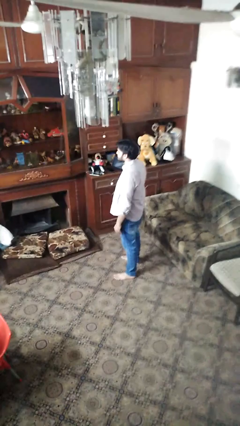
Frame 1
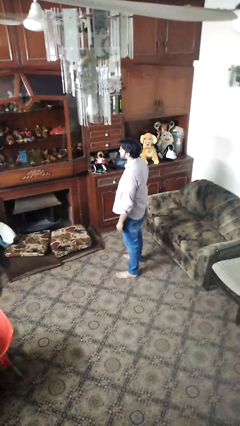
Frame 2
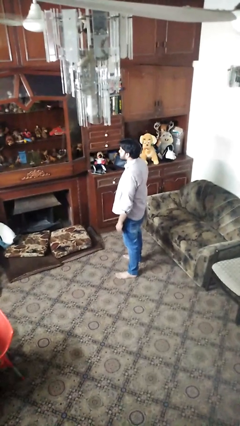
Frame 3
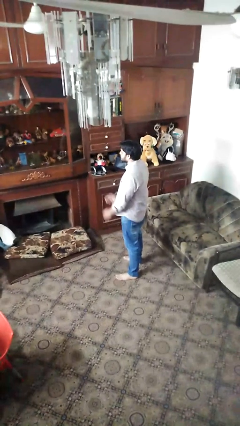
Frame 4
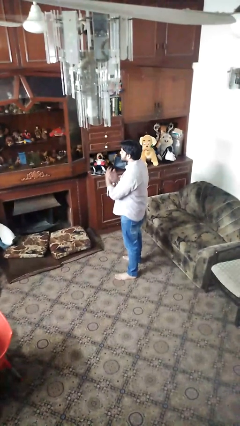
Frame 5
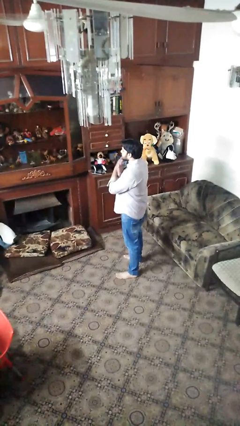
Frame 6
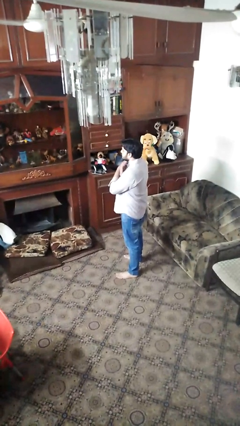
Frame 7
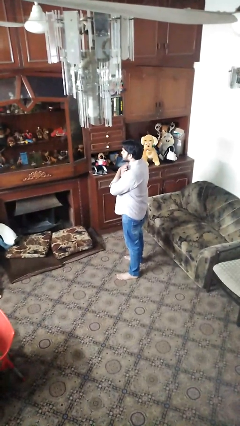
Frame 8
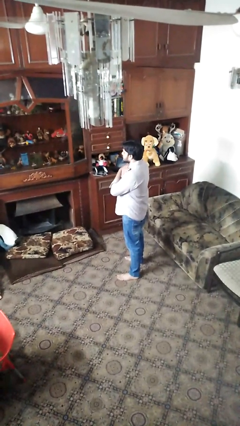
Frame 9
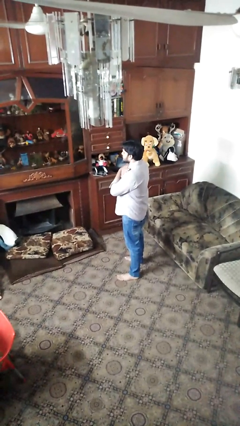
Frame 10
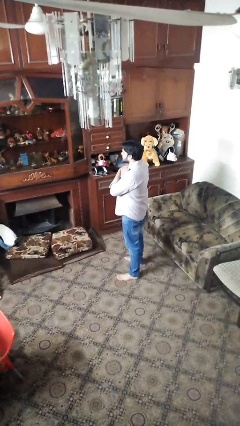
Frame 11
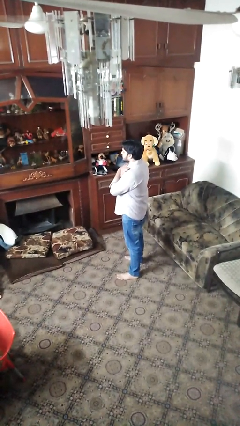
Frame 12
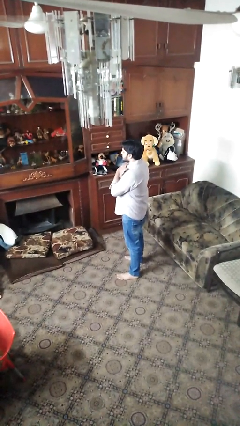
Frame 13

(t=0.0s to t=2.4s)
person gestures arms x

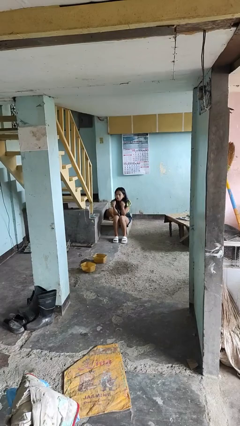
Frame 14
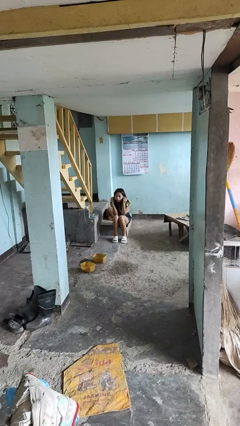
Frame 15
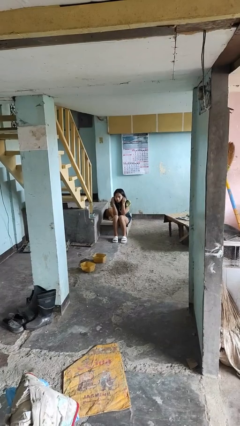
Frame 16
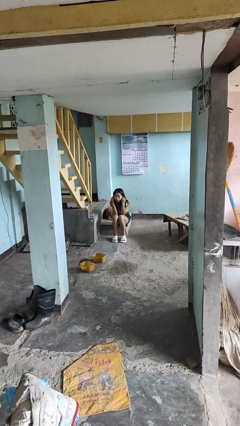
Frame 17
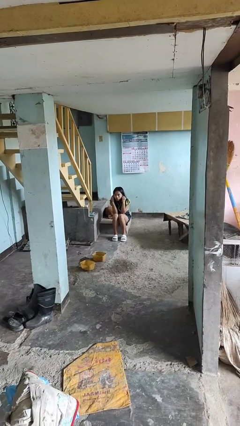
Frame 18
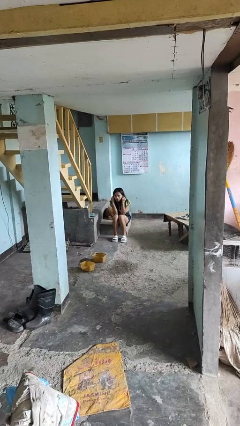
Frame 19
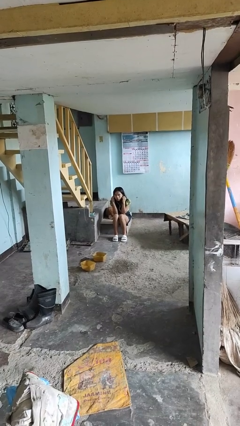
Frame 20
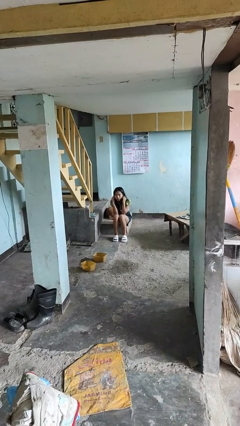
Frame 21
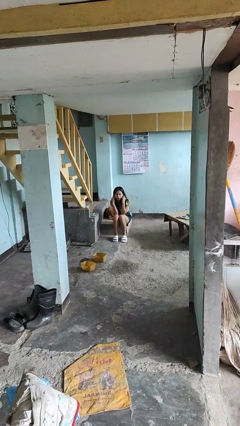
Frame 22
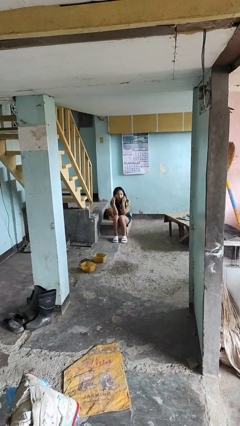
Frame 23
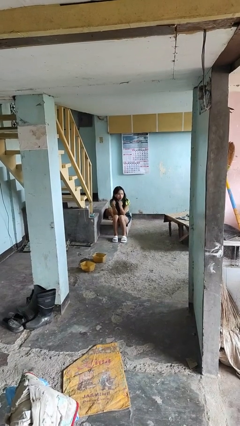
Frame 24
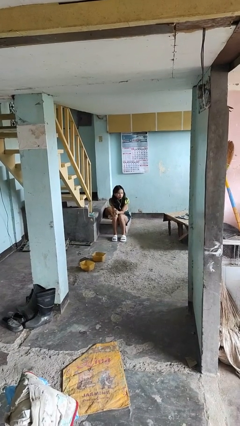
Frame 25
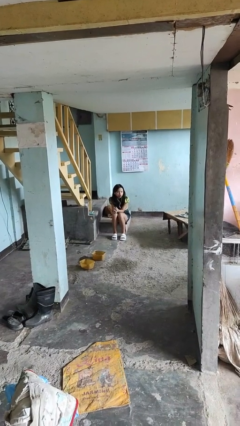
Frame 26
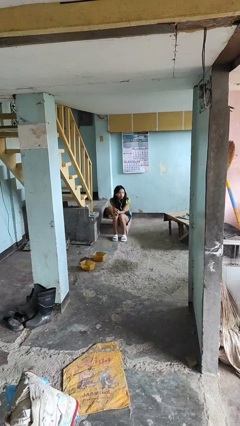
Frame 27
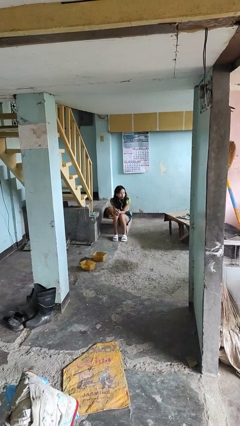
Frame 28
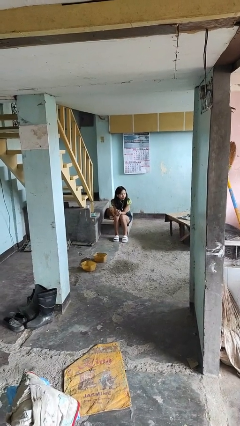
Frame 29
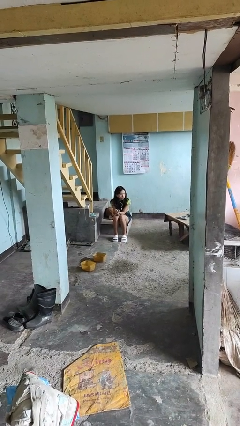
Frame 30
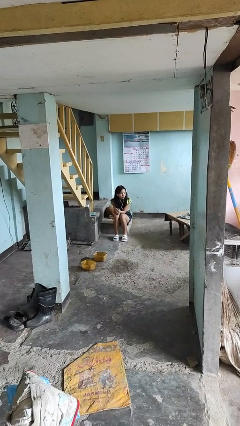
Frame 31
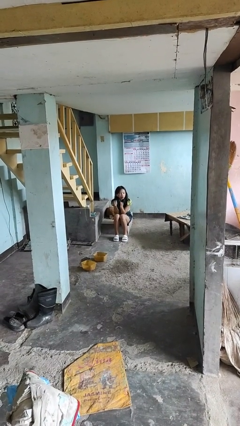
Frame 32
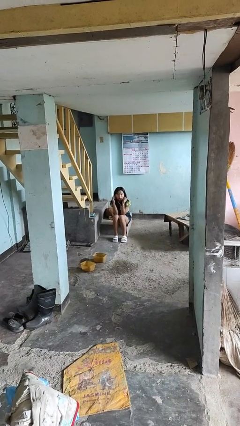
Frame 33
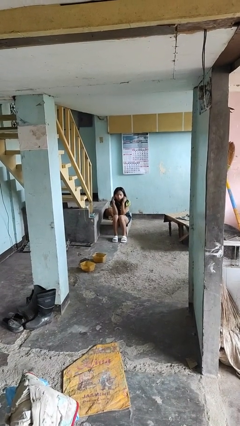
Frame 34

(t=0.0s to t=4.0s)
person puts on headphones

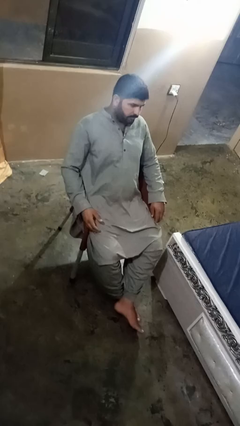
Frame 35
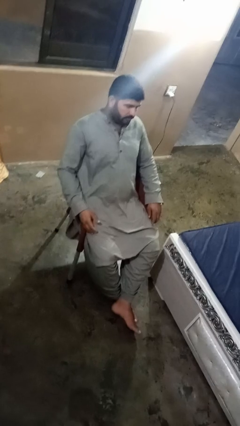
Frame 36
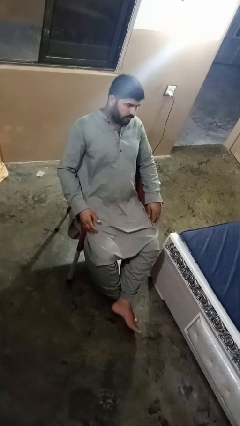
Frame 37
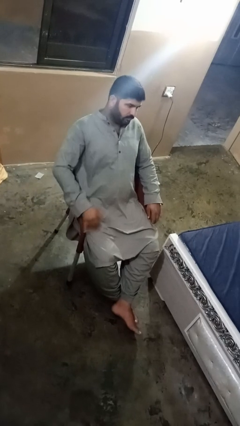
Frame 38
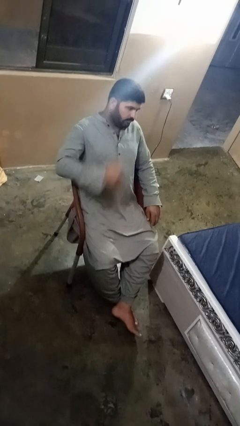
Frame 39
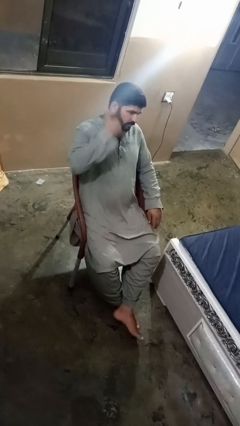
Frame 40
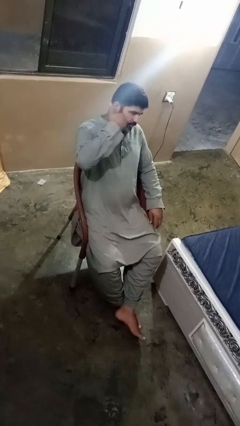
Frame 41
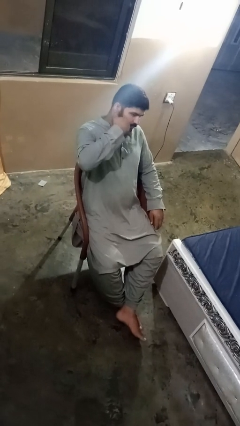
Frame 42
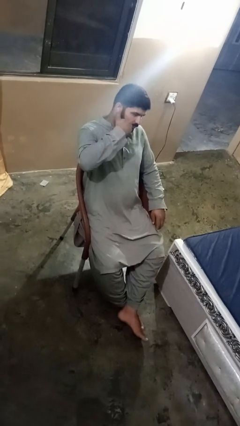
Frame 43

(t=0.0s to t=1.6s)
person gestures call me

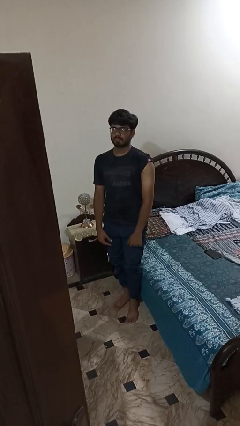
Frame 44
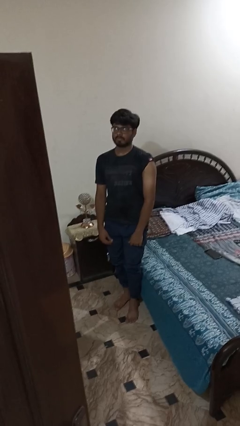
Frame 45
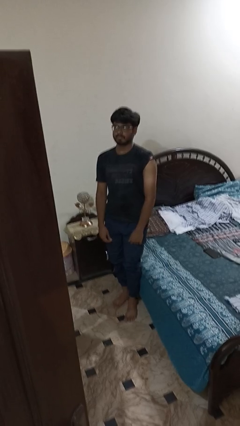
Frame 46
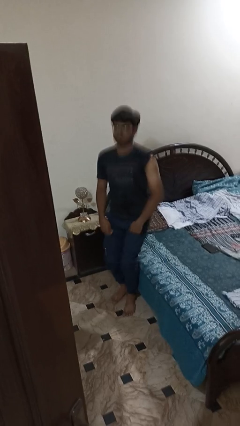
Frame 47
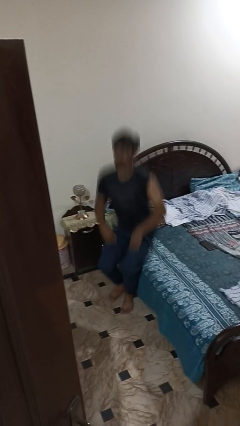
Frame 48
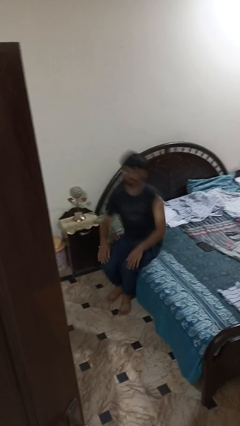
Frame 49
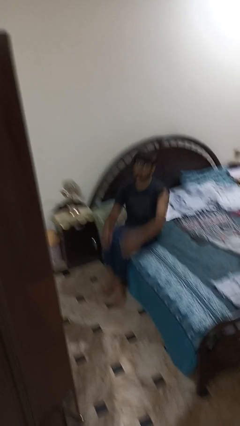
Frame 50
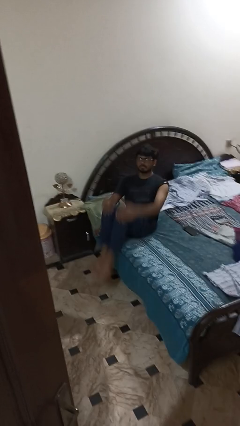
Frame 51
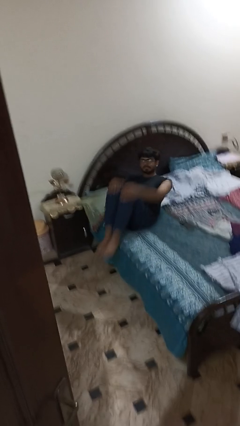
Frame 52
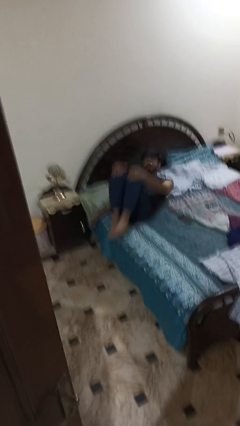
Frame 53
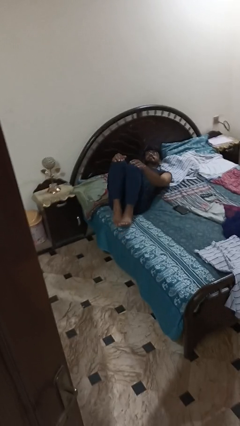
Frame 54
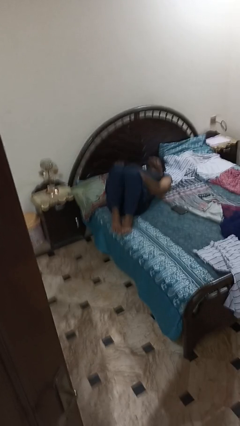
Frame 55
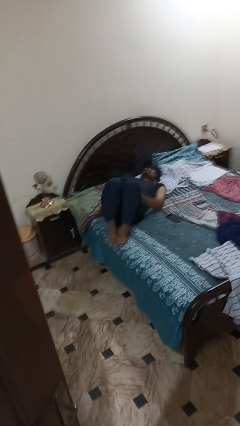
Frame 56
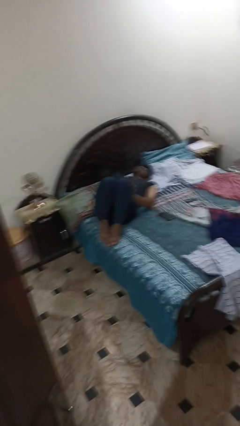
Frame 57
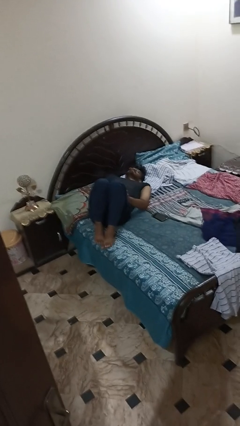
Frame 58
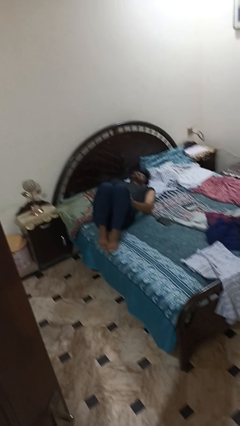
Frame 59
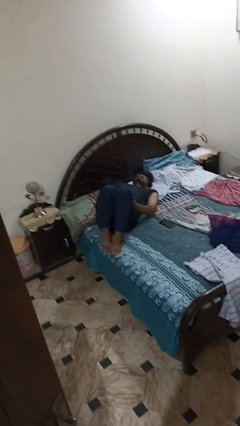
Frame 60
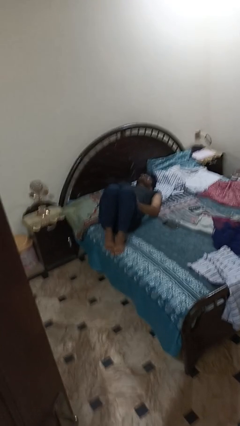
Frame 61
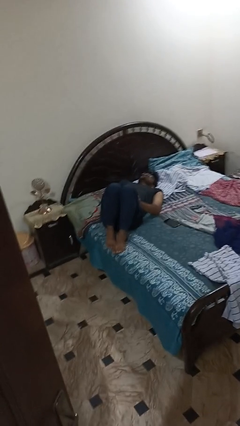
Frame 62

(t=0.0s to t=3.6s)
person lies down on bed

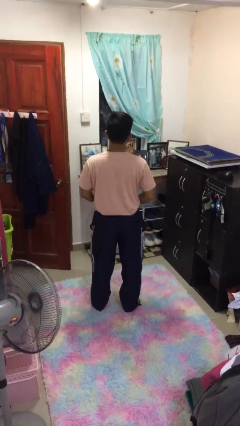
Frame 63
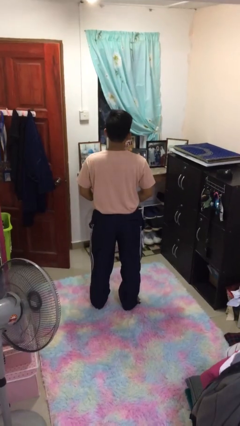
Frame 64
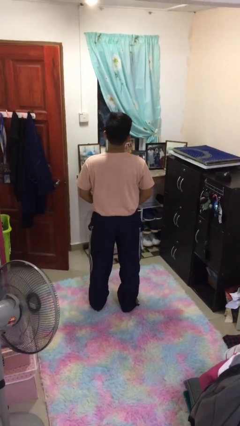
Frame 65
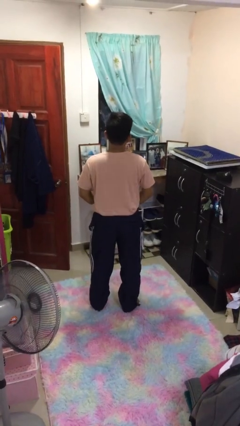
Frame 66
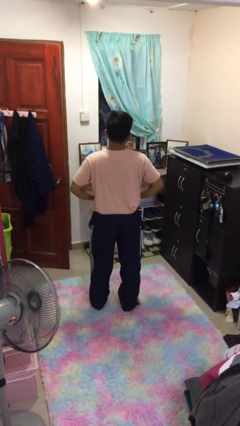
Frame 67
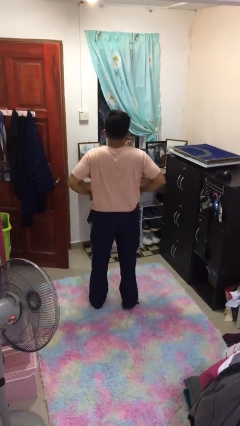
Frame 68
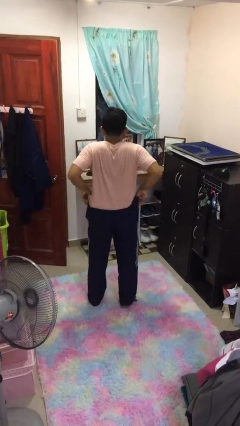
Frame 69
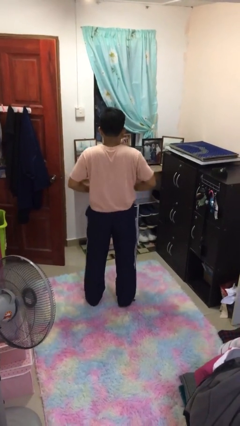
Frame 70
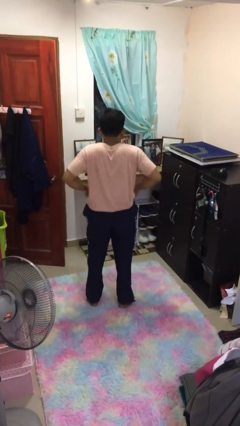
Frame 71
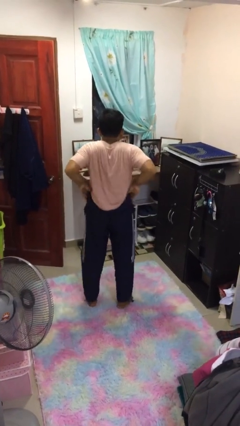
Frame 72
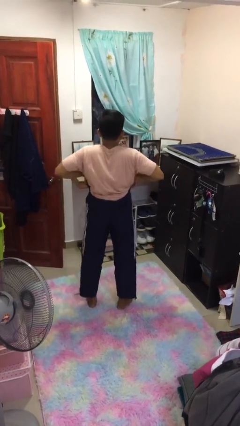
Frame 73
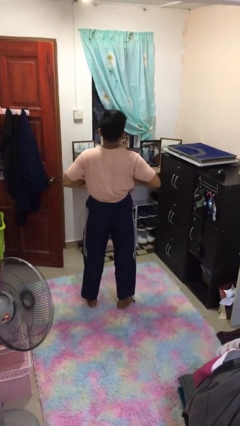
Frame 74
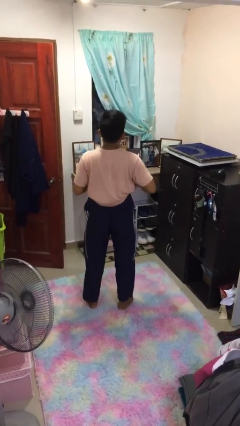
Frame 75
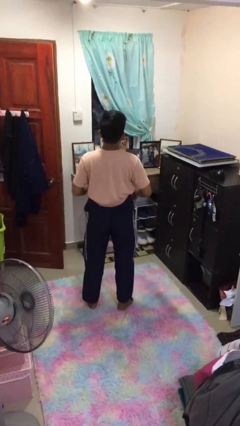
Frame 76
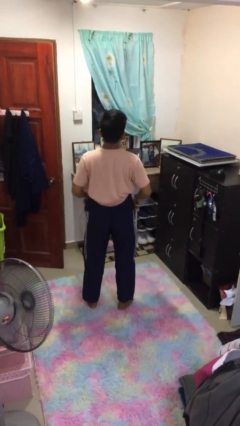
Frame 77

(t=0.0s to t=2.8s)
person hikes up pants

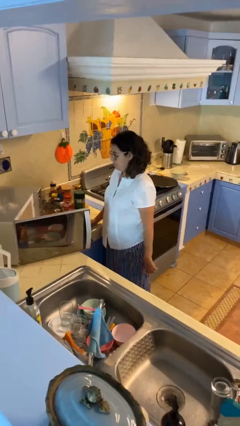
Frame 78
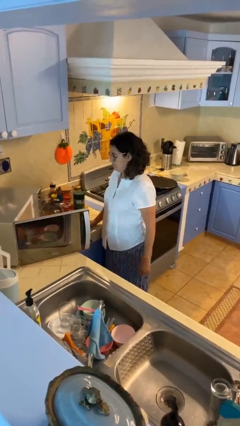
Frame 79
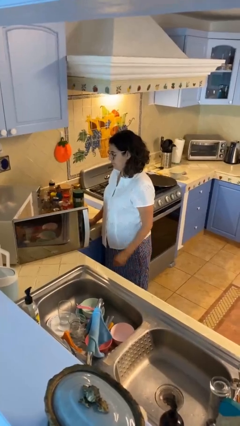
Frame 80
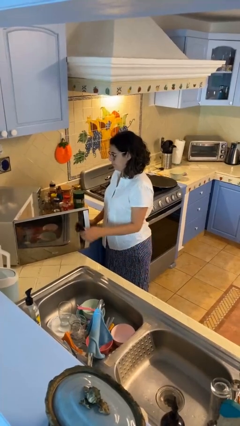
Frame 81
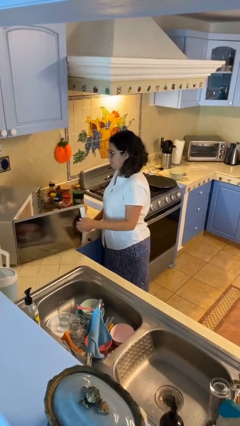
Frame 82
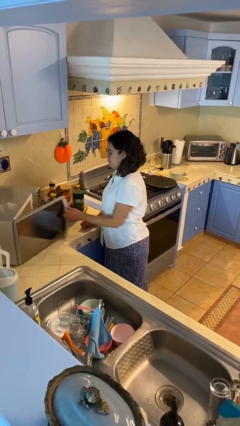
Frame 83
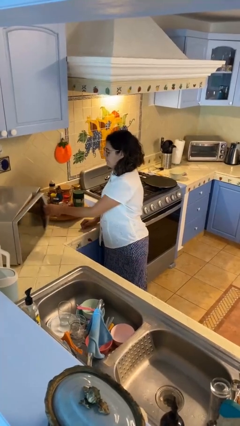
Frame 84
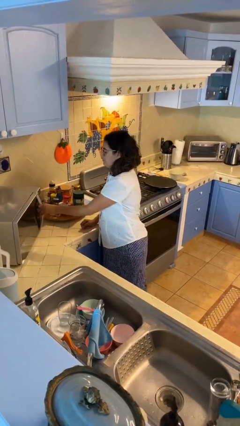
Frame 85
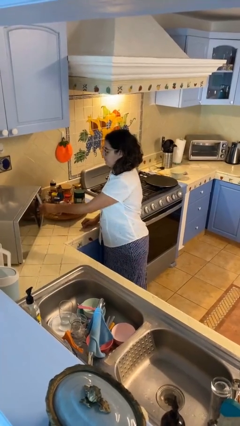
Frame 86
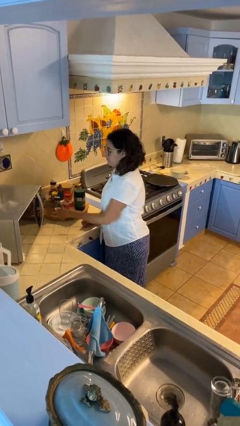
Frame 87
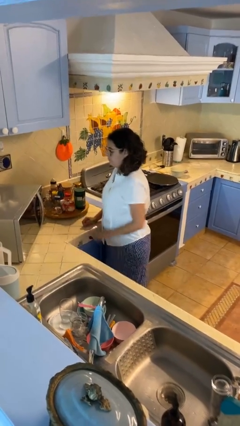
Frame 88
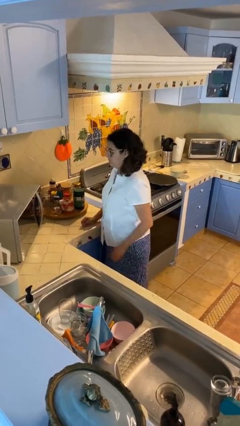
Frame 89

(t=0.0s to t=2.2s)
person closes microwave

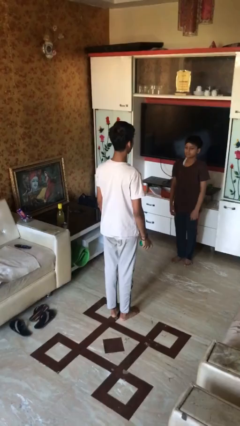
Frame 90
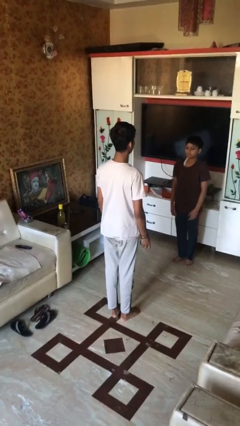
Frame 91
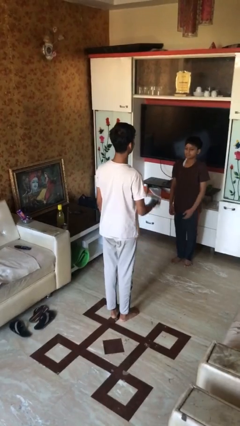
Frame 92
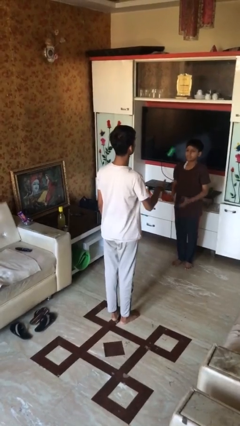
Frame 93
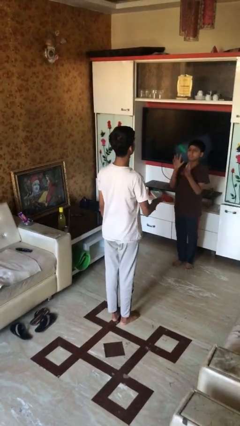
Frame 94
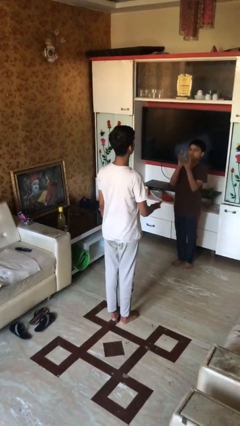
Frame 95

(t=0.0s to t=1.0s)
person throws object to person
